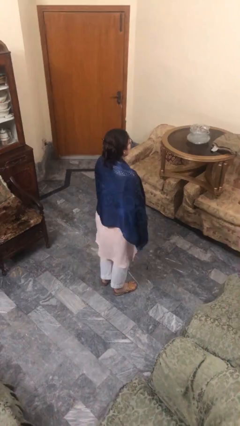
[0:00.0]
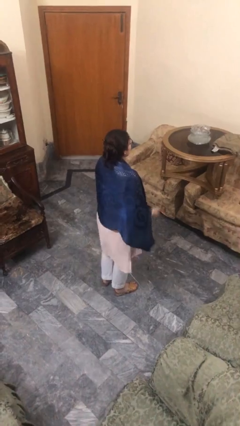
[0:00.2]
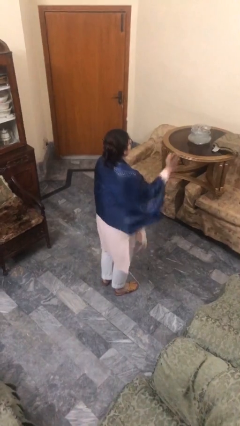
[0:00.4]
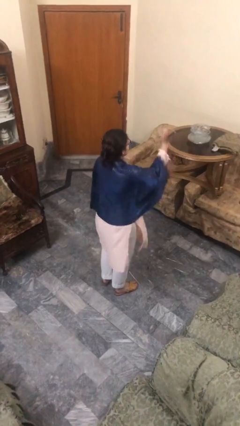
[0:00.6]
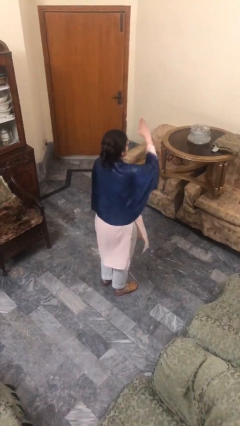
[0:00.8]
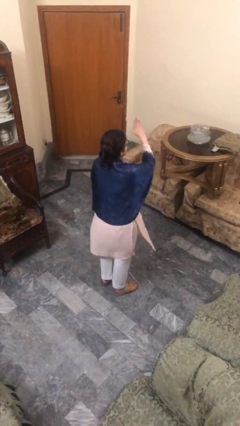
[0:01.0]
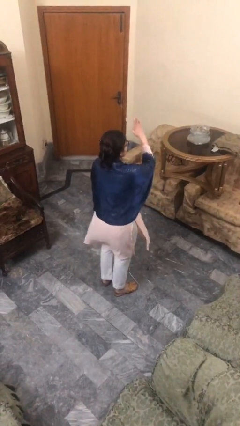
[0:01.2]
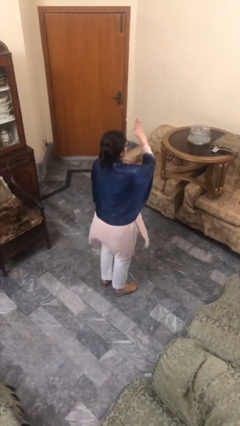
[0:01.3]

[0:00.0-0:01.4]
person gestures swipe left

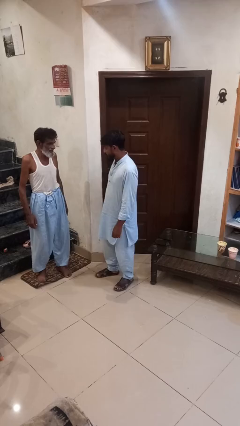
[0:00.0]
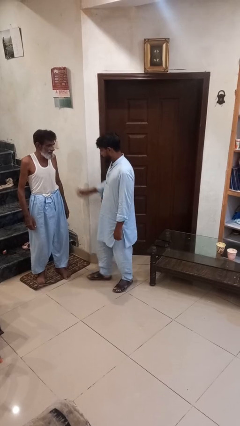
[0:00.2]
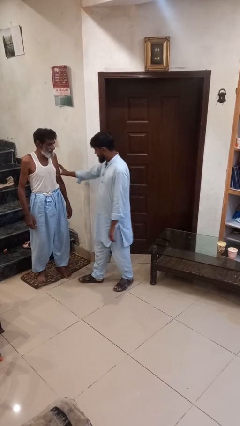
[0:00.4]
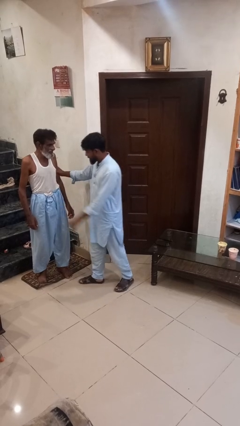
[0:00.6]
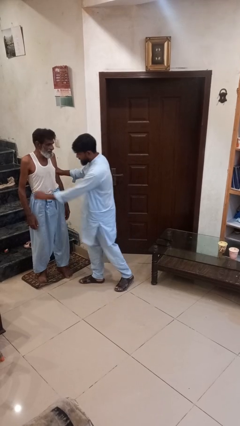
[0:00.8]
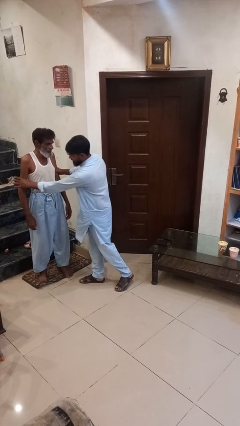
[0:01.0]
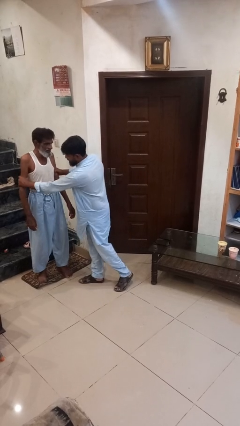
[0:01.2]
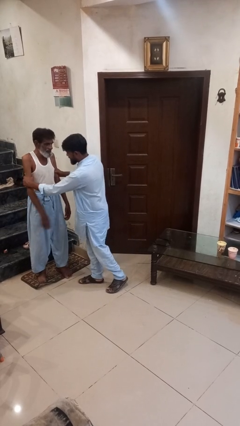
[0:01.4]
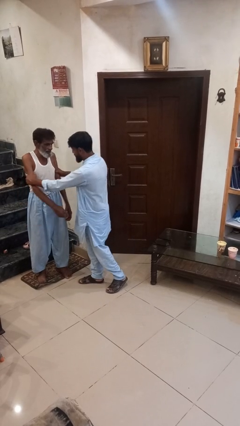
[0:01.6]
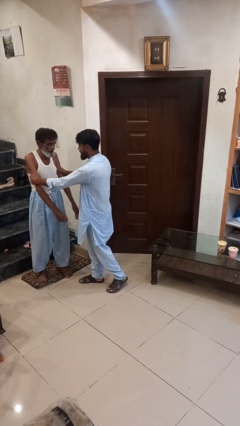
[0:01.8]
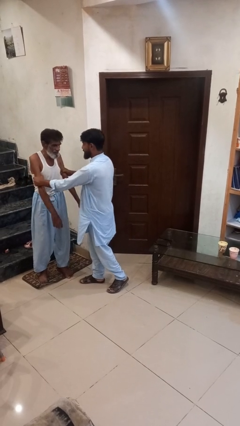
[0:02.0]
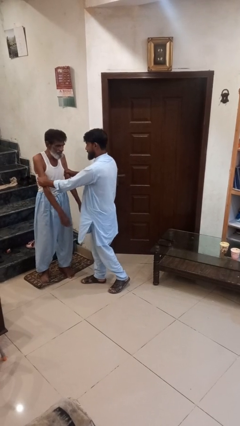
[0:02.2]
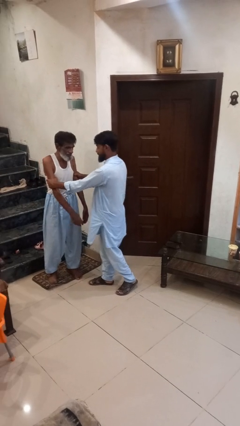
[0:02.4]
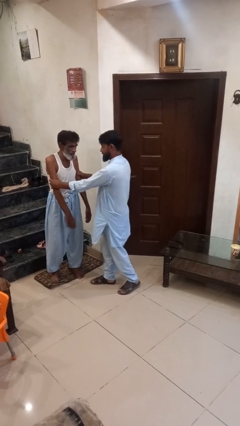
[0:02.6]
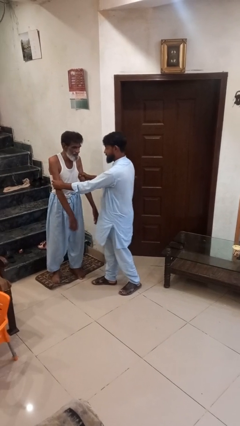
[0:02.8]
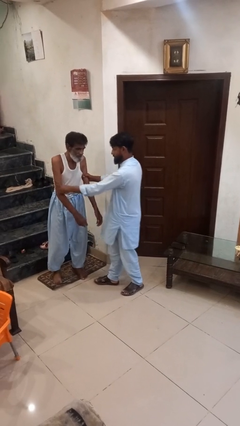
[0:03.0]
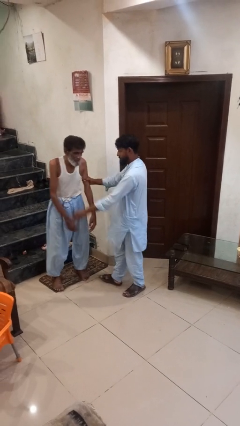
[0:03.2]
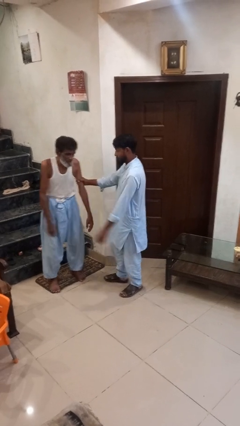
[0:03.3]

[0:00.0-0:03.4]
person grabs person by bicep

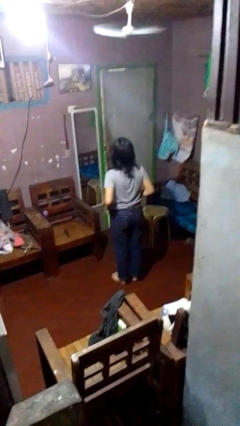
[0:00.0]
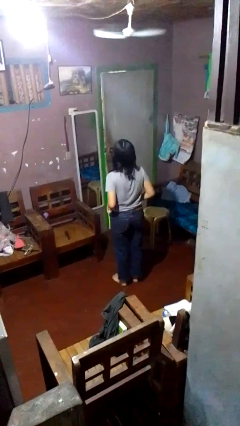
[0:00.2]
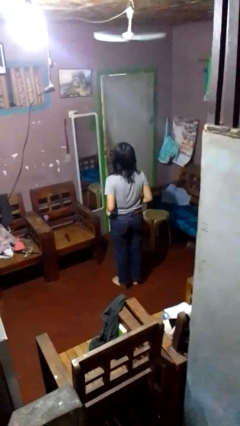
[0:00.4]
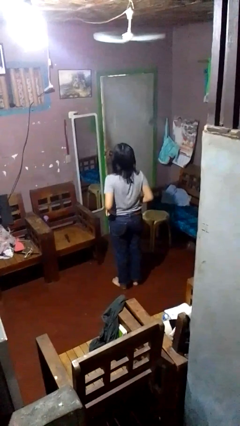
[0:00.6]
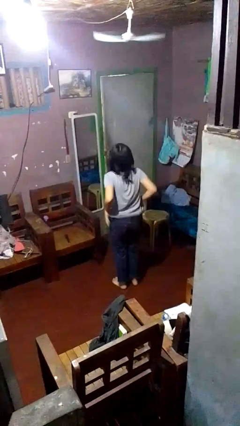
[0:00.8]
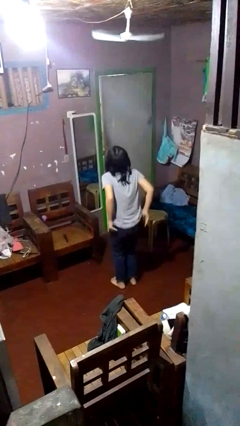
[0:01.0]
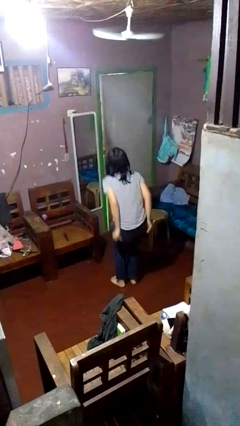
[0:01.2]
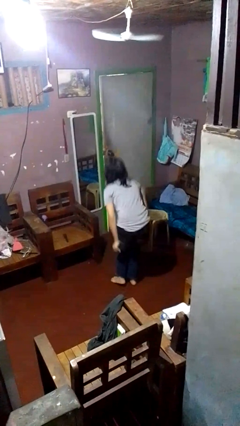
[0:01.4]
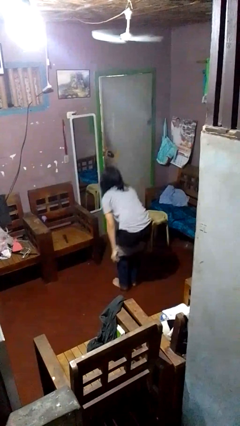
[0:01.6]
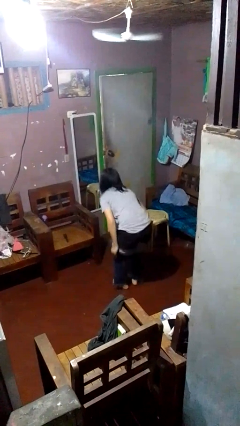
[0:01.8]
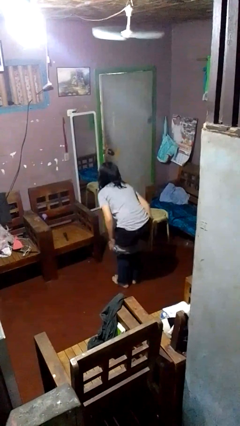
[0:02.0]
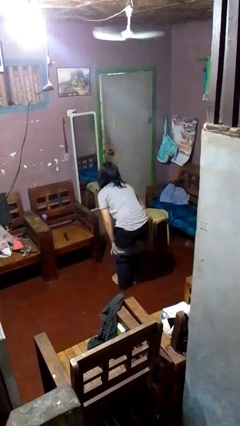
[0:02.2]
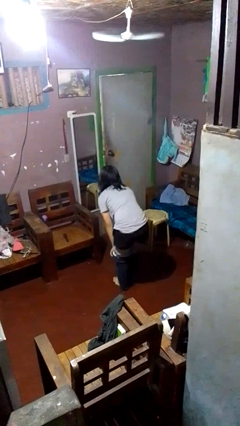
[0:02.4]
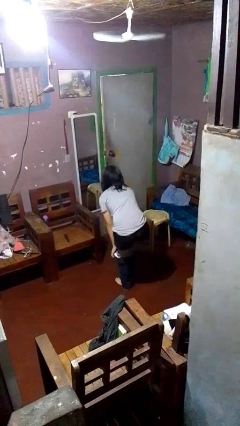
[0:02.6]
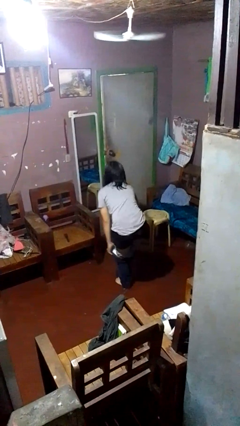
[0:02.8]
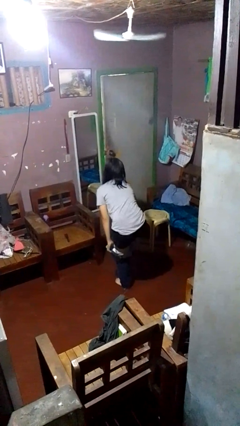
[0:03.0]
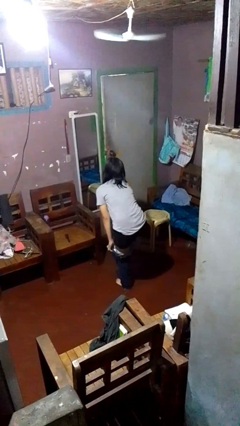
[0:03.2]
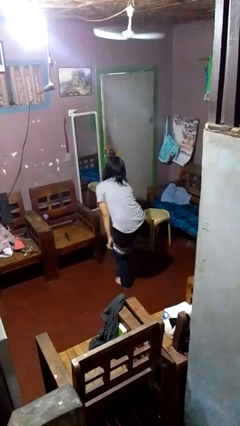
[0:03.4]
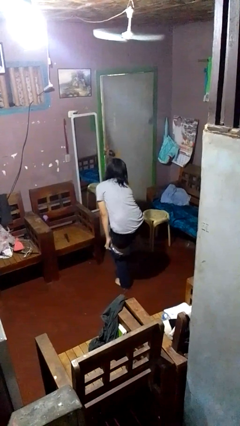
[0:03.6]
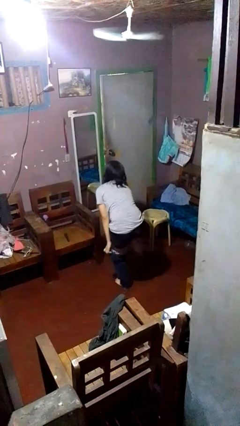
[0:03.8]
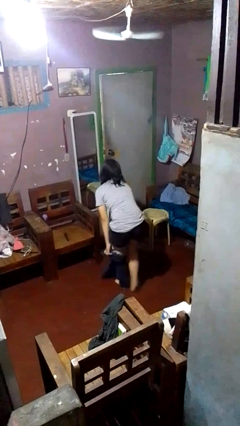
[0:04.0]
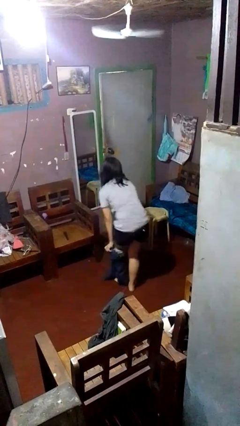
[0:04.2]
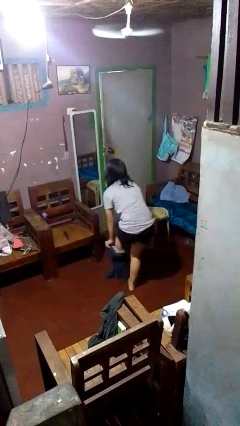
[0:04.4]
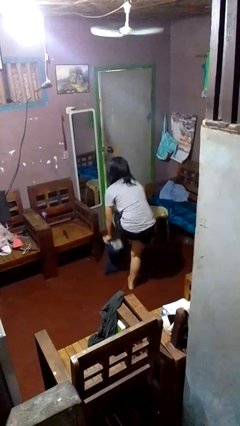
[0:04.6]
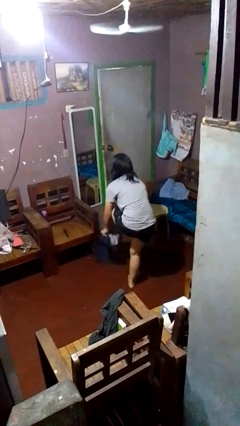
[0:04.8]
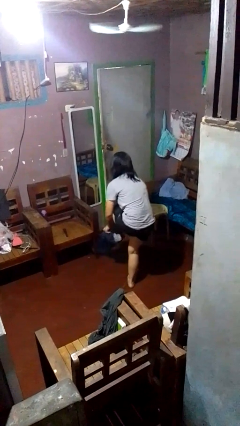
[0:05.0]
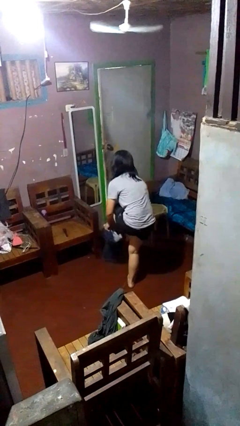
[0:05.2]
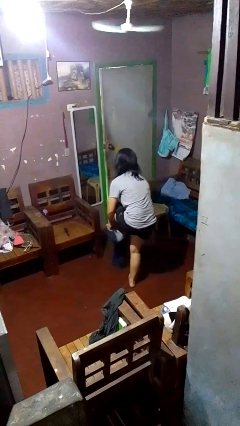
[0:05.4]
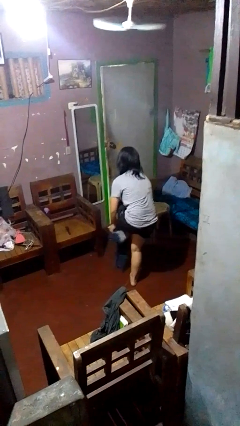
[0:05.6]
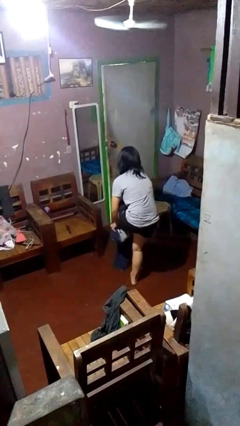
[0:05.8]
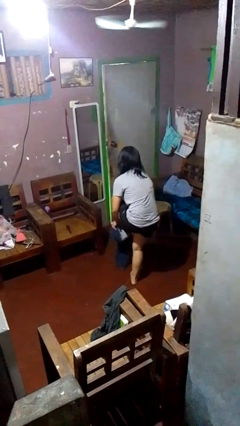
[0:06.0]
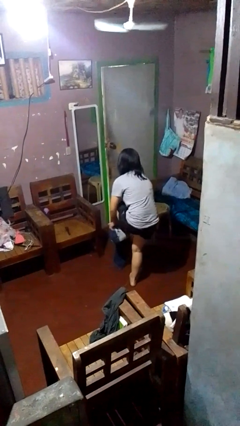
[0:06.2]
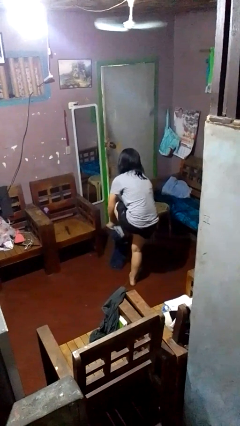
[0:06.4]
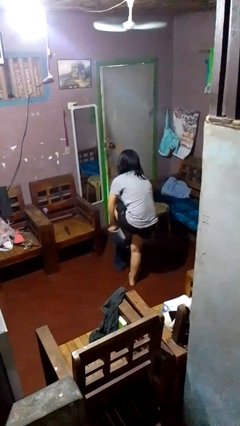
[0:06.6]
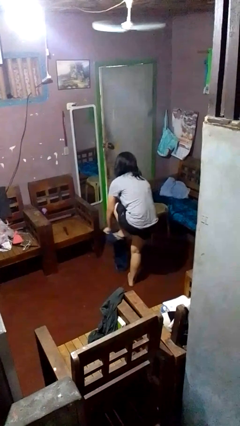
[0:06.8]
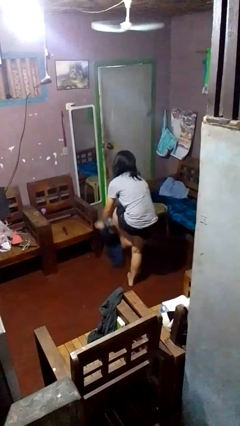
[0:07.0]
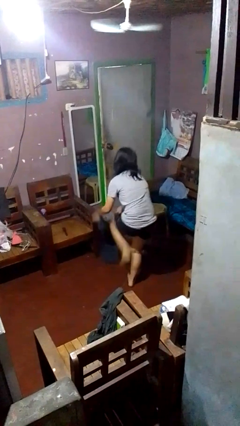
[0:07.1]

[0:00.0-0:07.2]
person takes off pants

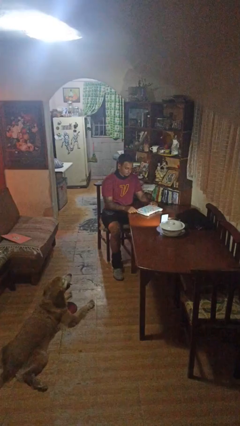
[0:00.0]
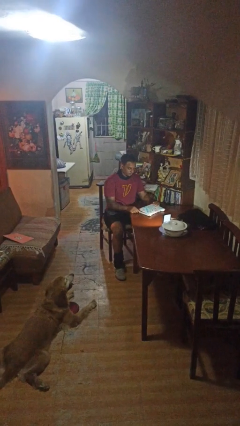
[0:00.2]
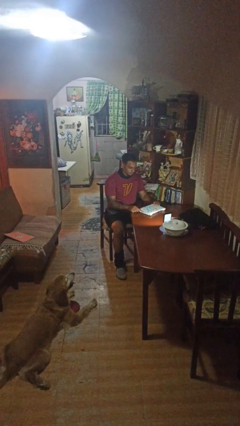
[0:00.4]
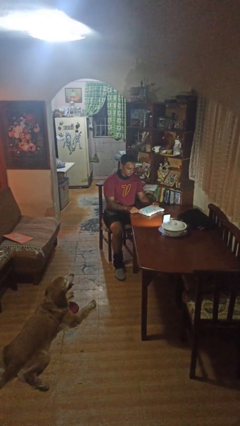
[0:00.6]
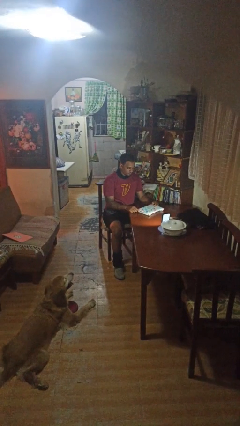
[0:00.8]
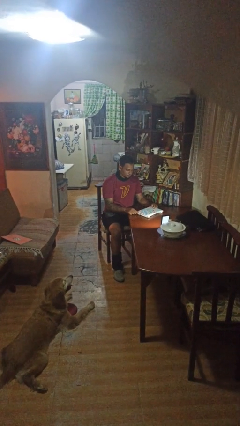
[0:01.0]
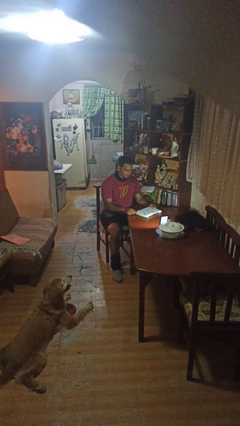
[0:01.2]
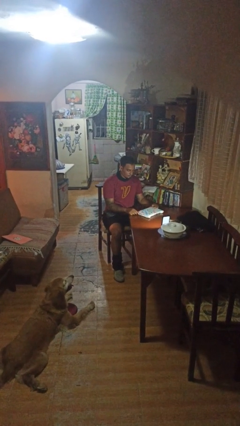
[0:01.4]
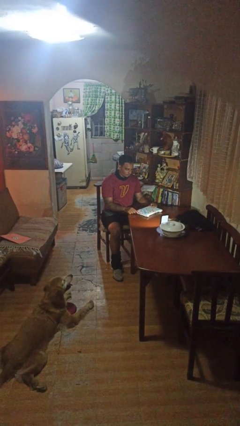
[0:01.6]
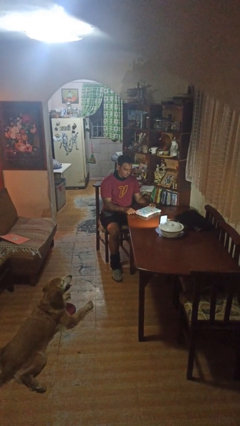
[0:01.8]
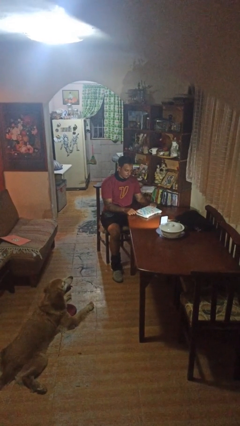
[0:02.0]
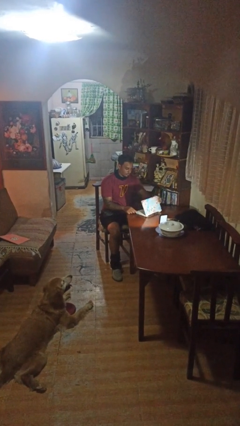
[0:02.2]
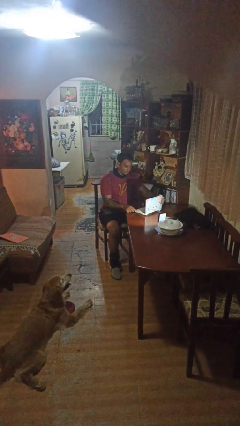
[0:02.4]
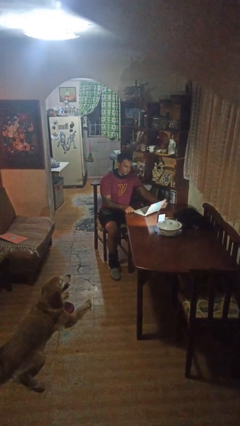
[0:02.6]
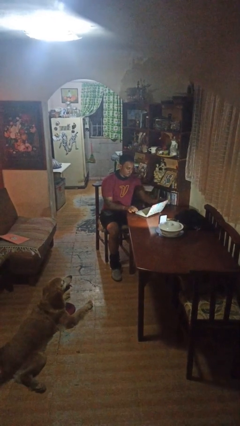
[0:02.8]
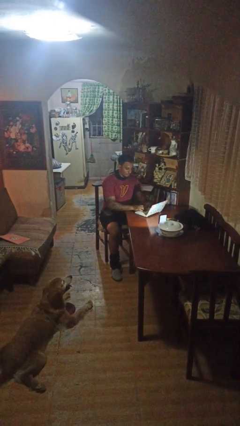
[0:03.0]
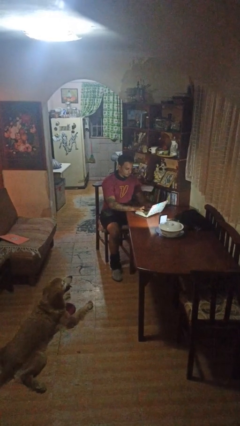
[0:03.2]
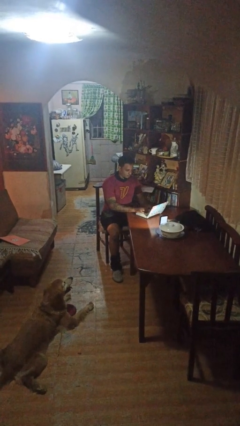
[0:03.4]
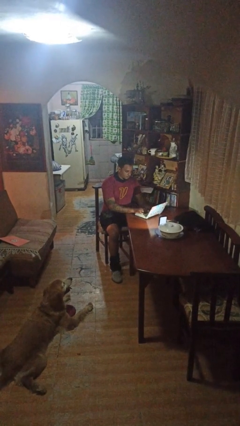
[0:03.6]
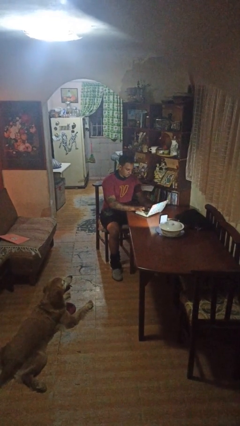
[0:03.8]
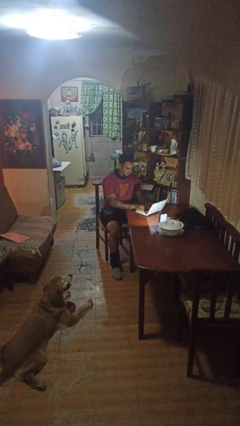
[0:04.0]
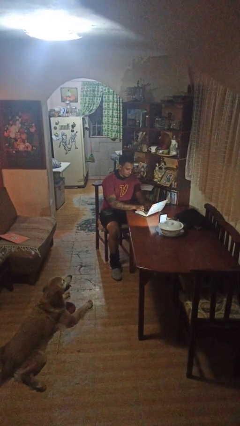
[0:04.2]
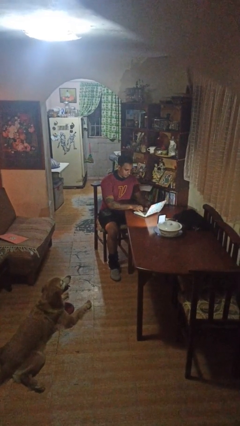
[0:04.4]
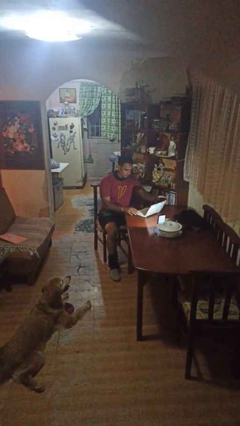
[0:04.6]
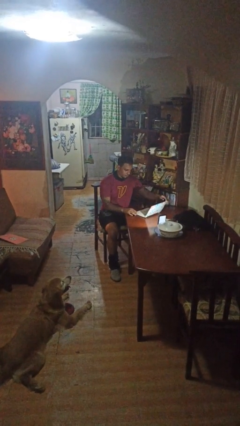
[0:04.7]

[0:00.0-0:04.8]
person interacts with laptop

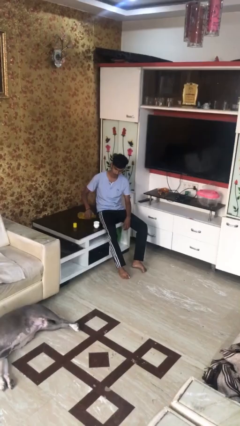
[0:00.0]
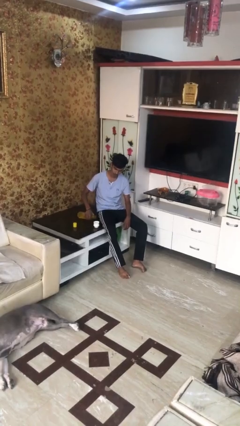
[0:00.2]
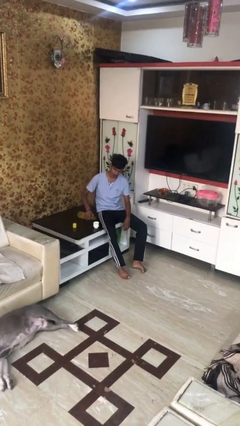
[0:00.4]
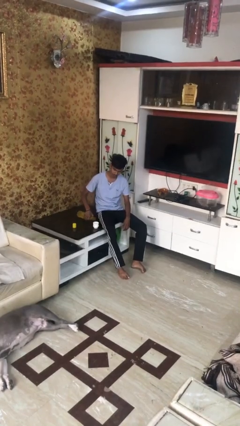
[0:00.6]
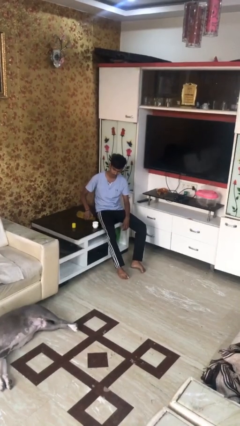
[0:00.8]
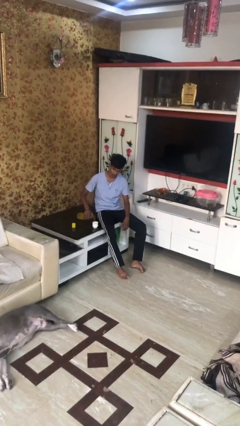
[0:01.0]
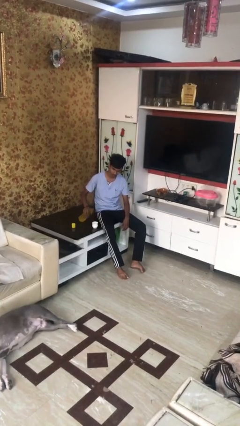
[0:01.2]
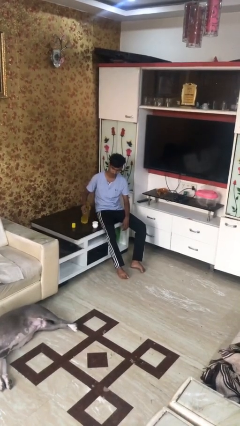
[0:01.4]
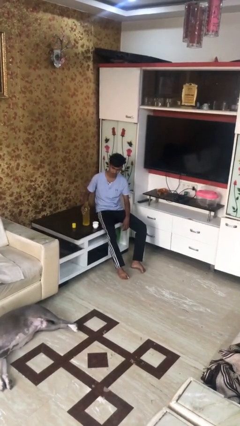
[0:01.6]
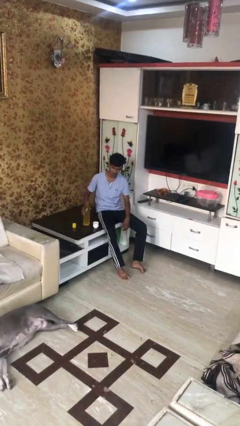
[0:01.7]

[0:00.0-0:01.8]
person pours liquid into cup
